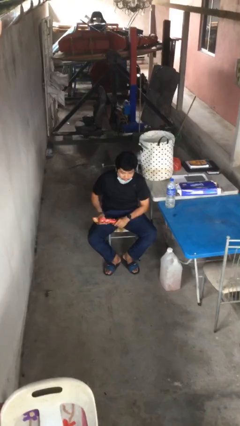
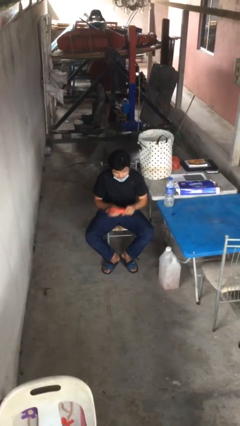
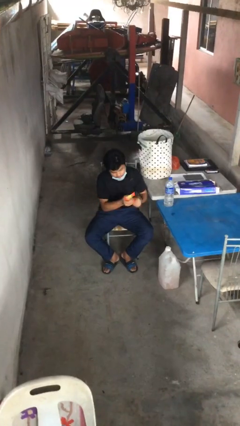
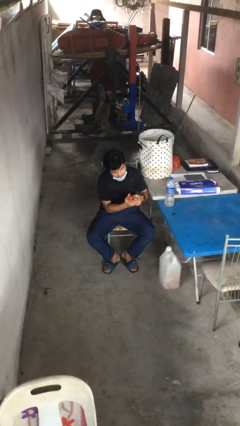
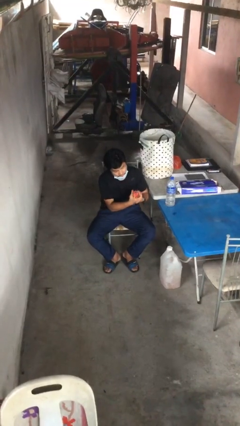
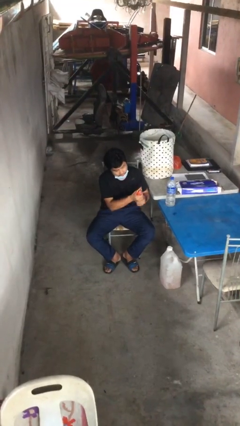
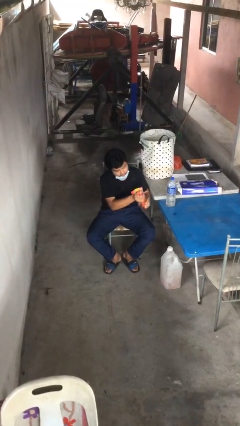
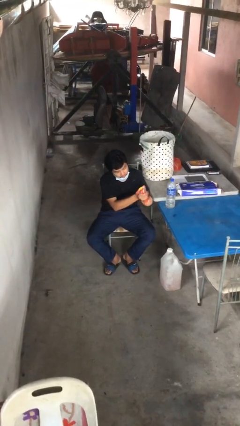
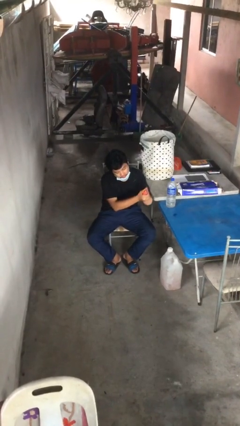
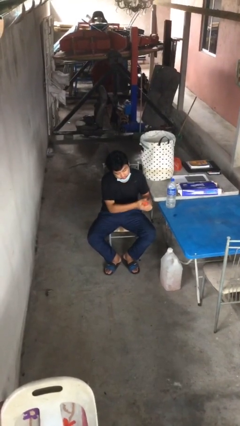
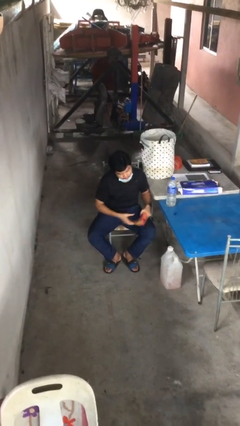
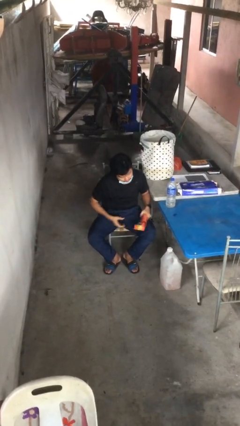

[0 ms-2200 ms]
person squeezes object

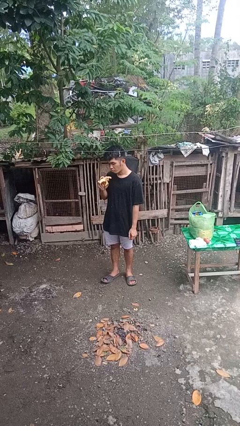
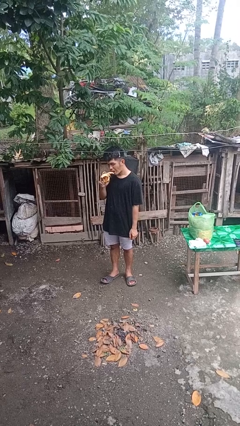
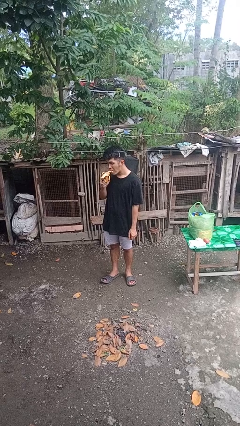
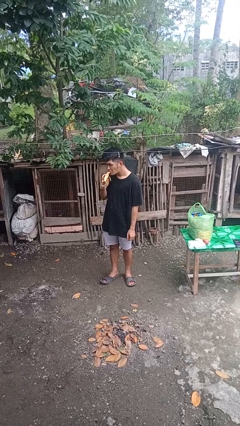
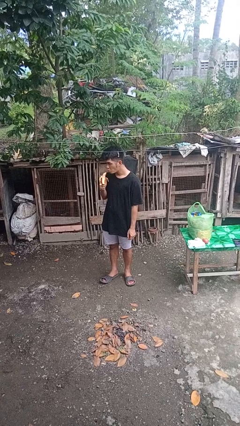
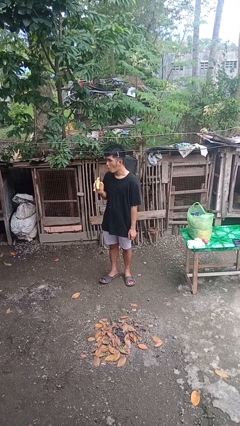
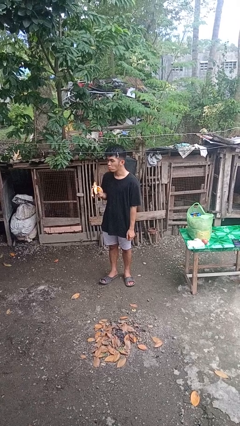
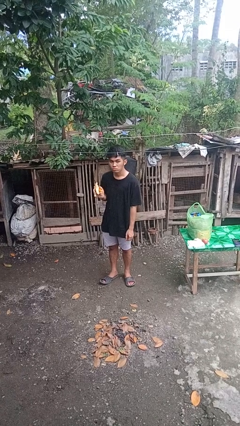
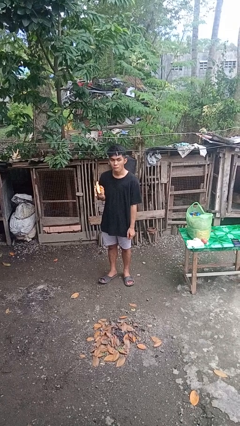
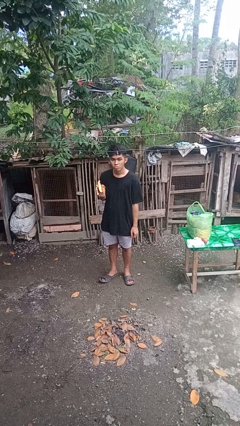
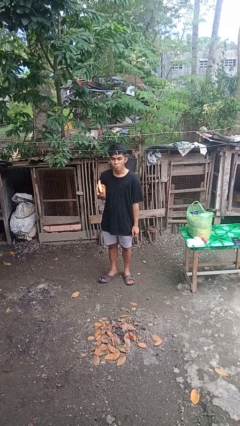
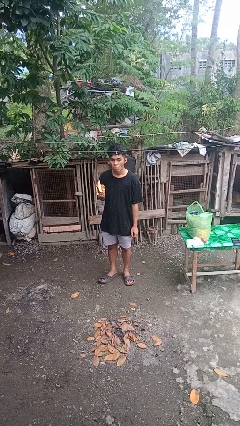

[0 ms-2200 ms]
person eats banana

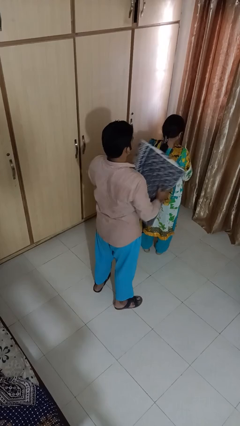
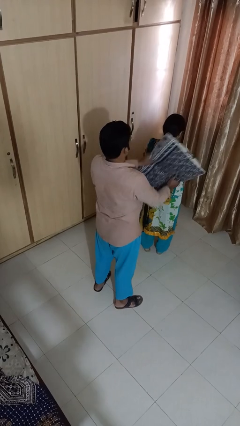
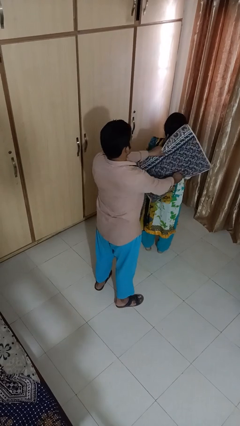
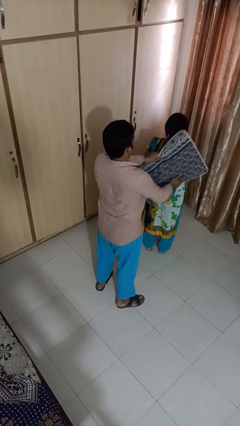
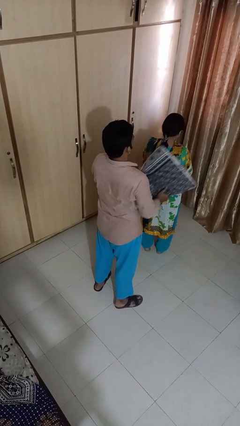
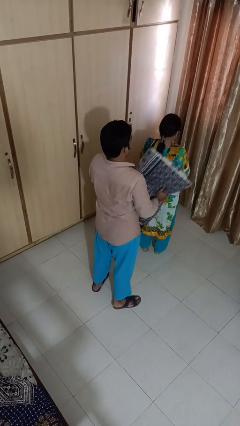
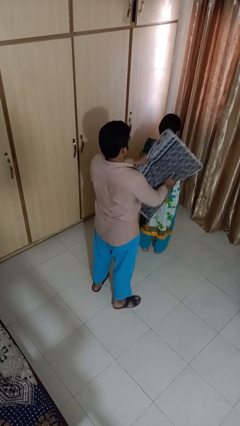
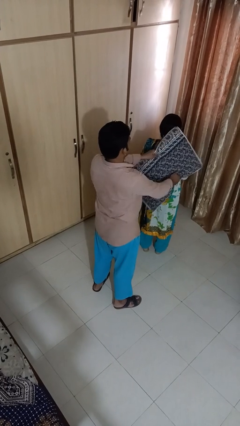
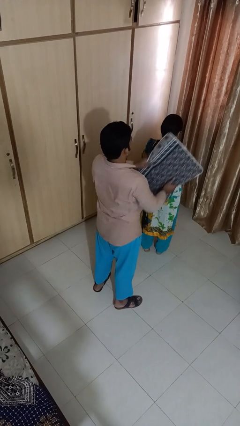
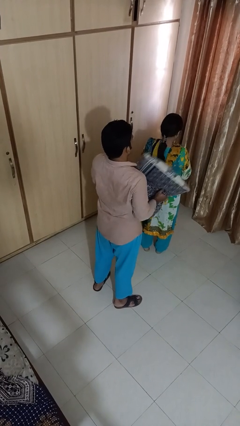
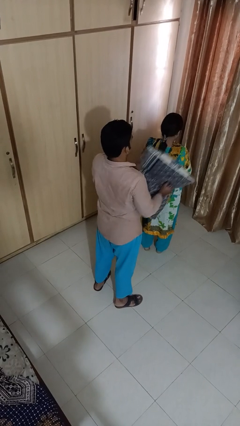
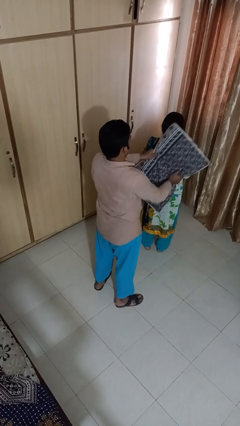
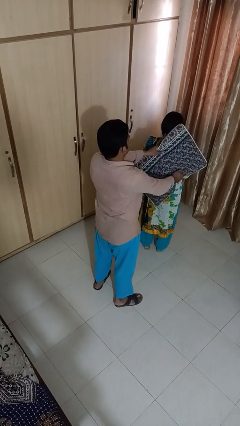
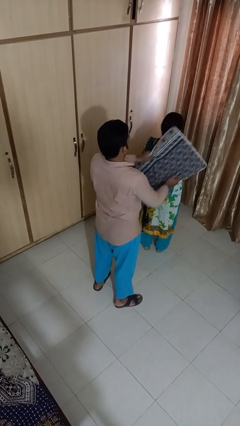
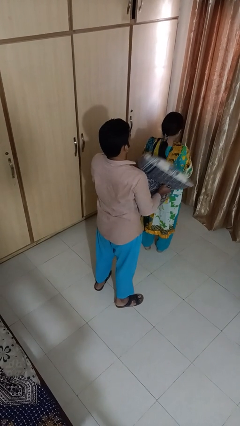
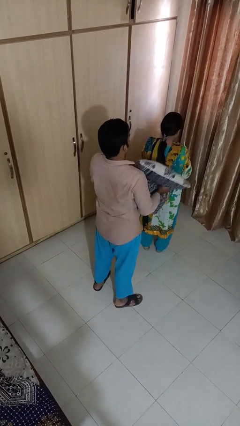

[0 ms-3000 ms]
person hits person with pillow

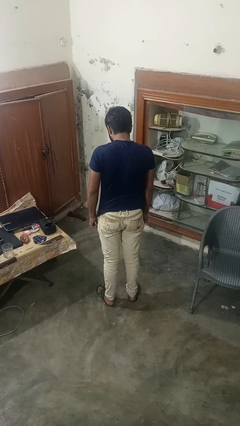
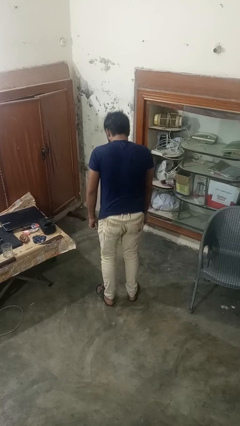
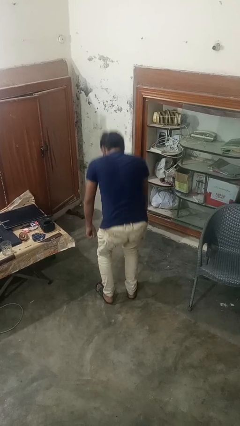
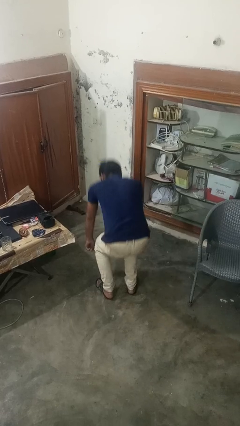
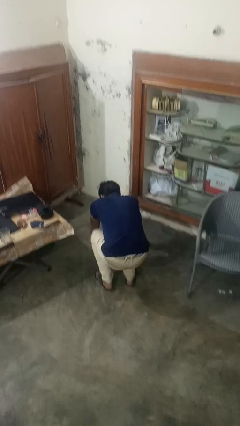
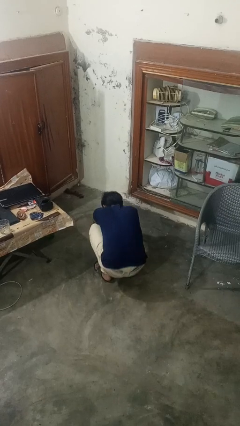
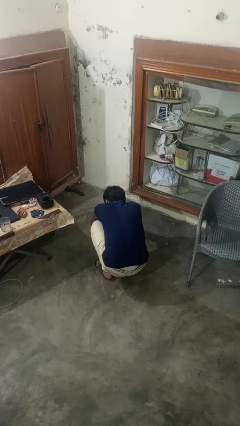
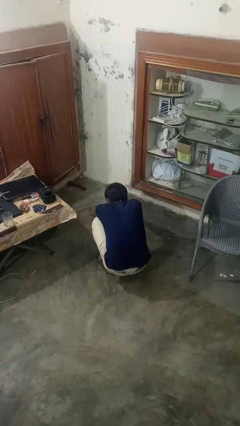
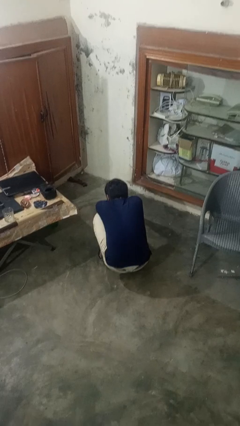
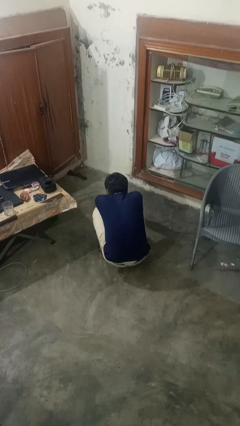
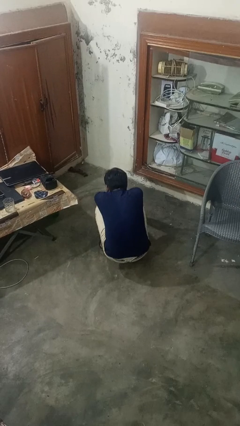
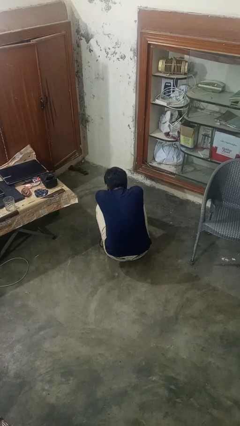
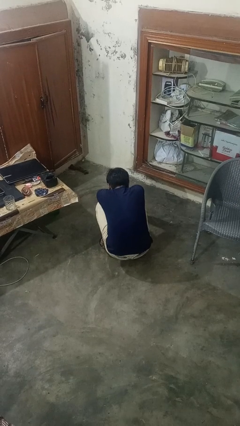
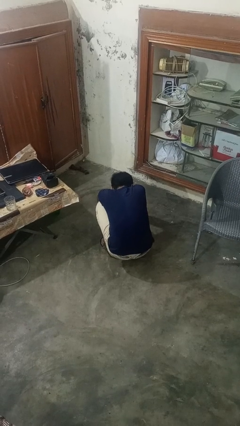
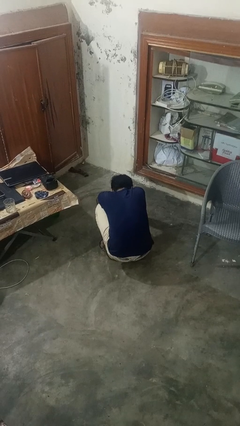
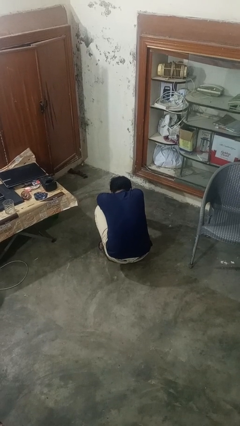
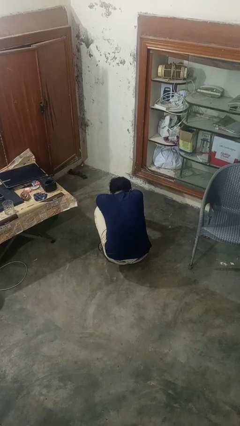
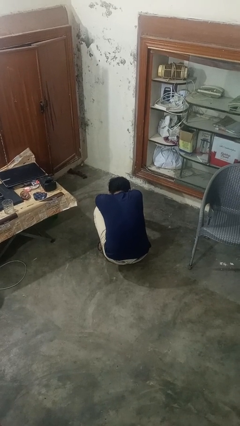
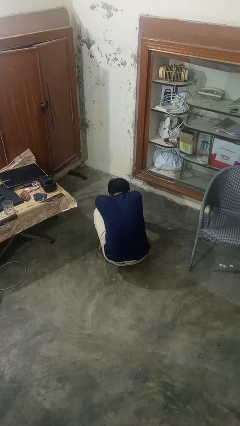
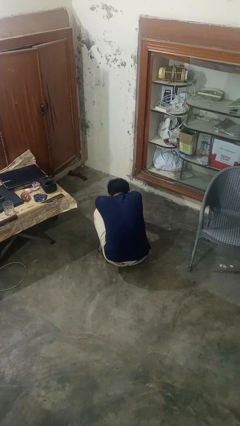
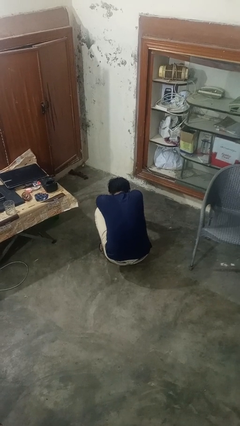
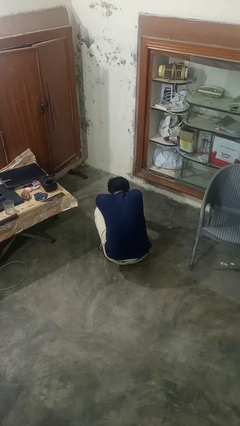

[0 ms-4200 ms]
person squats

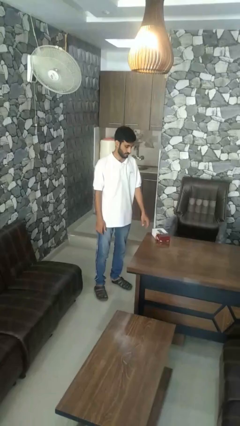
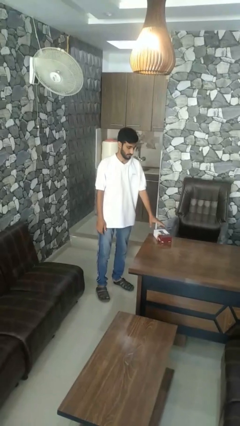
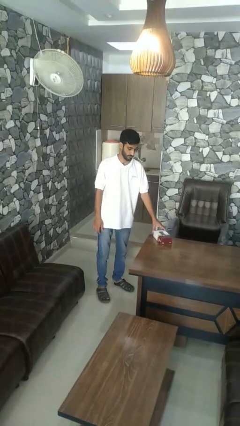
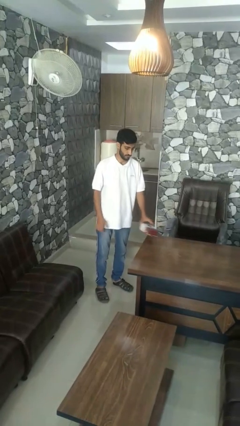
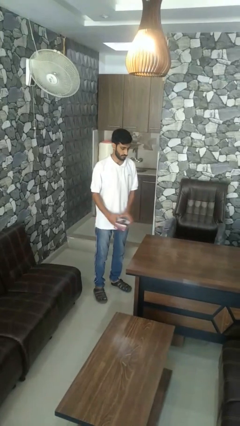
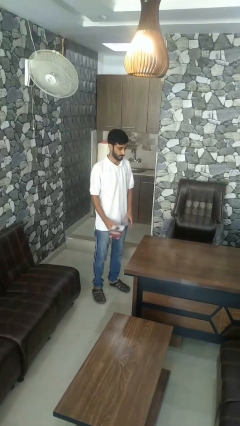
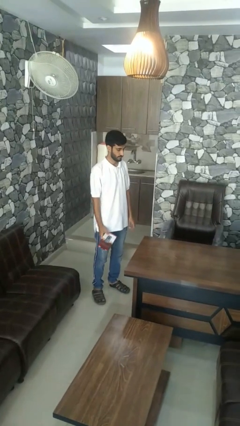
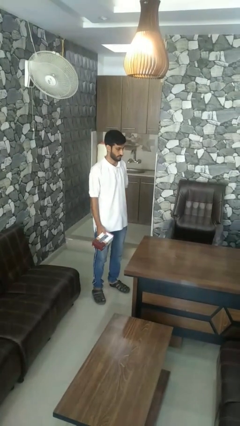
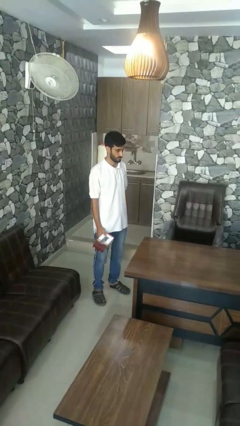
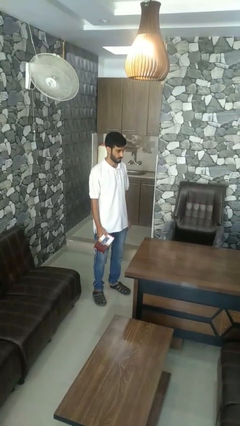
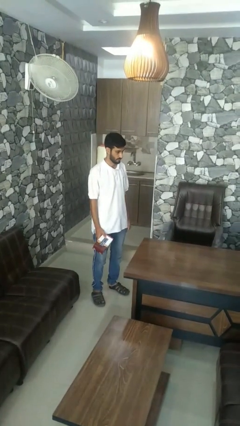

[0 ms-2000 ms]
person picks up object from table

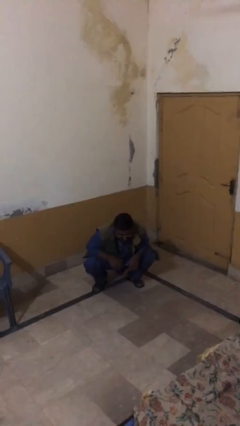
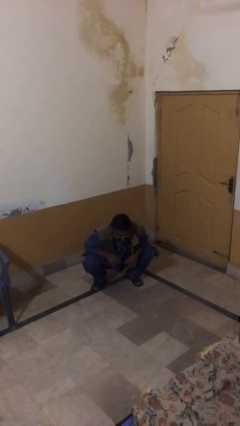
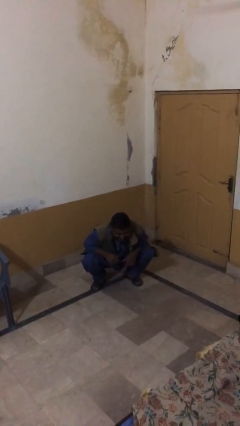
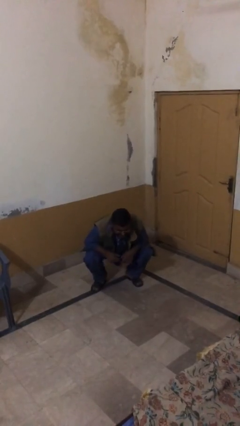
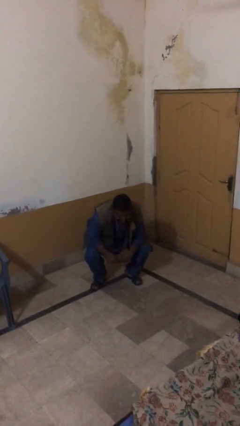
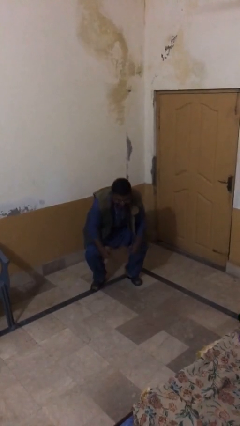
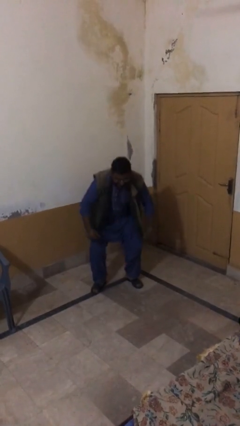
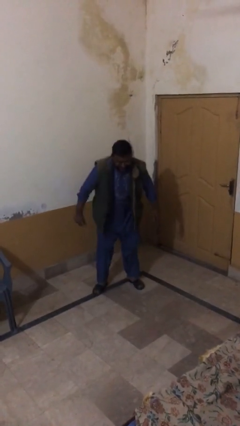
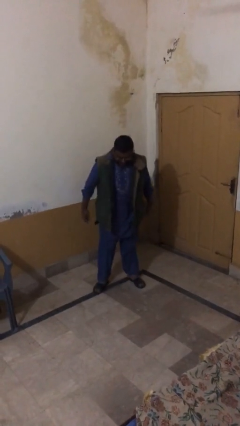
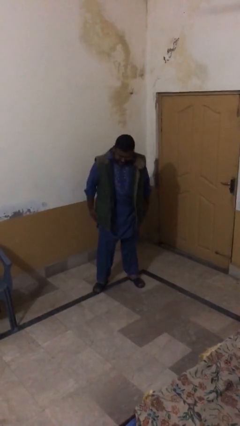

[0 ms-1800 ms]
person stands up

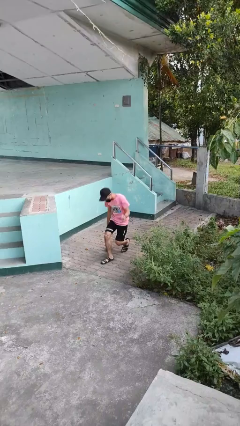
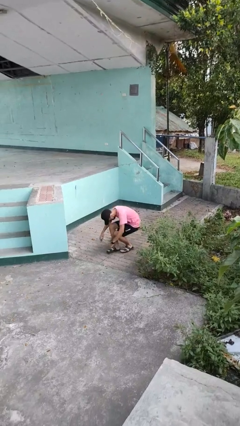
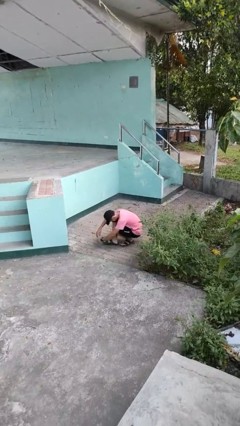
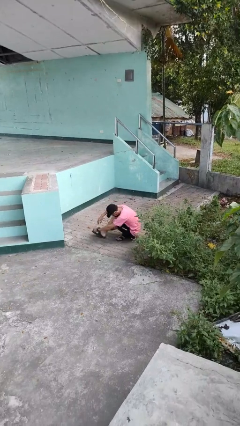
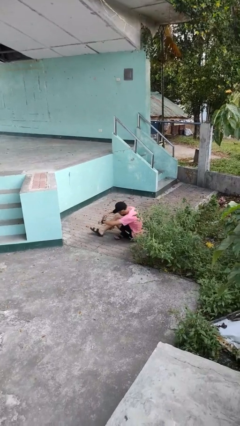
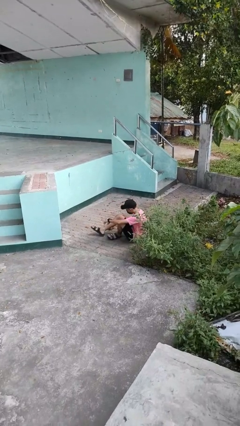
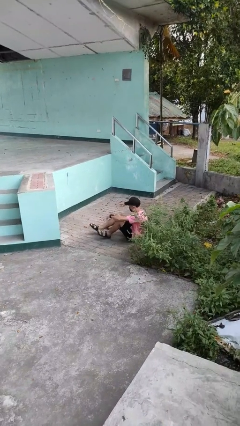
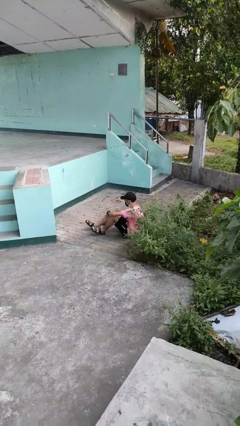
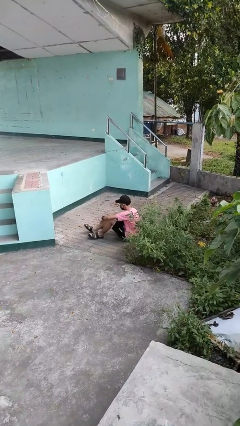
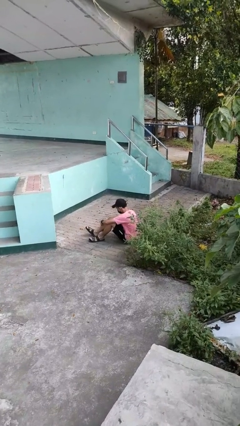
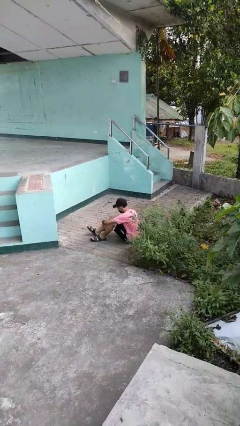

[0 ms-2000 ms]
person lies down on floor
